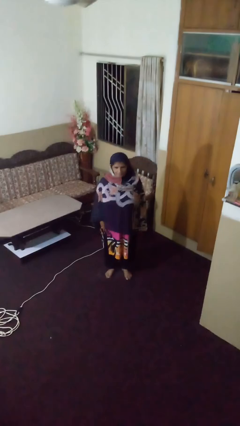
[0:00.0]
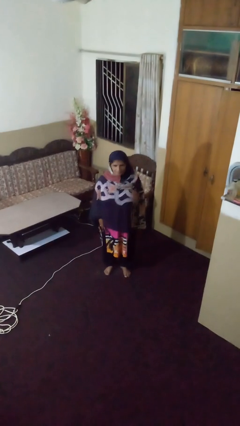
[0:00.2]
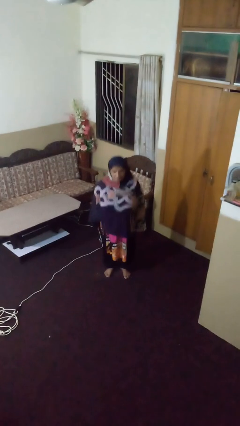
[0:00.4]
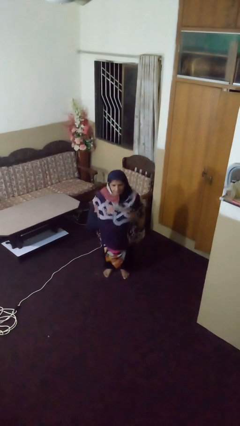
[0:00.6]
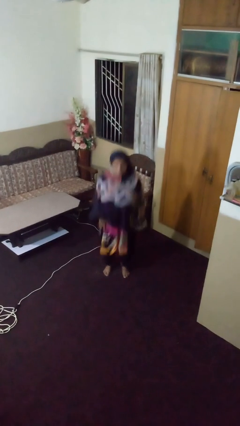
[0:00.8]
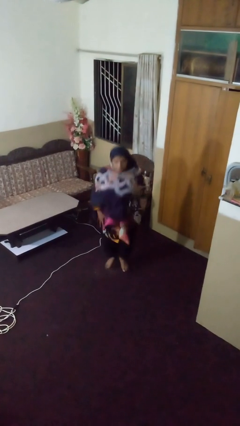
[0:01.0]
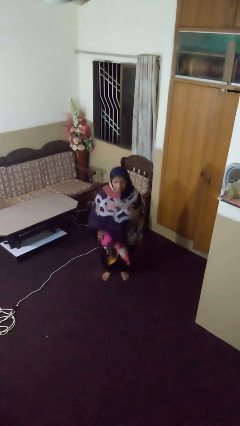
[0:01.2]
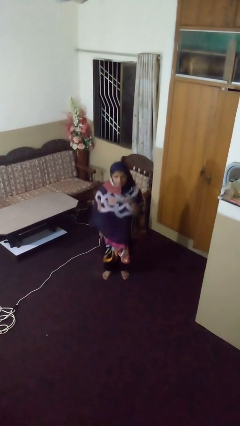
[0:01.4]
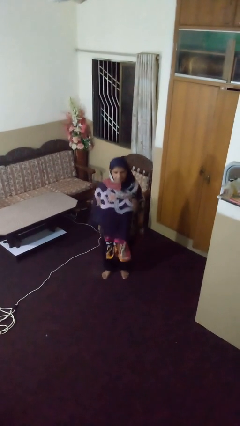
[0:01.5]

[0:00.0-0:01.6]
person jumps

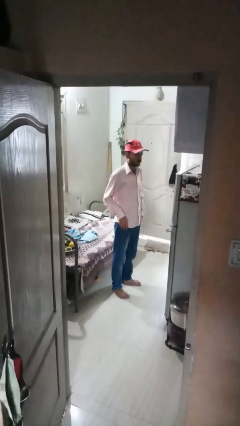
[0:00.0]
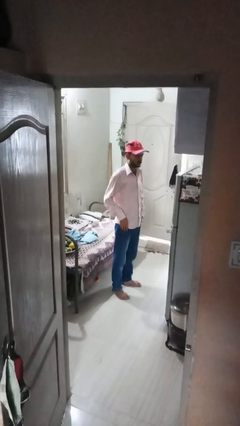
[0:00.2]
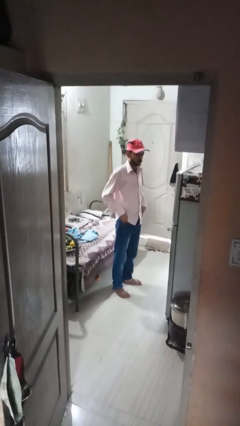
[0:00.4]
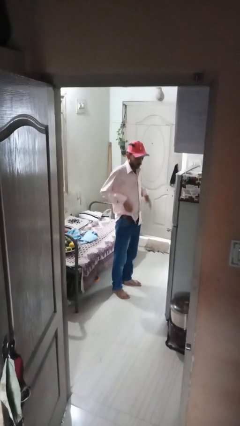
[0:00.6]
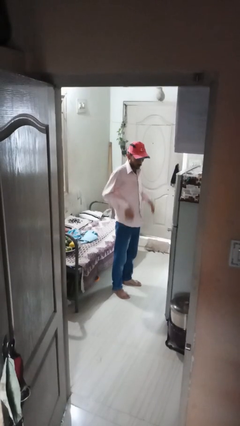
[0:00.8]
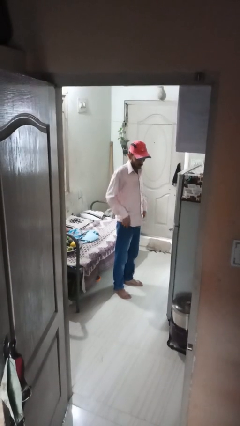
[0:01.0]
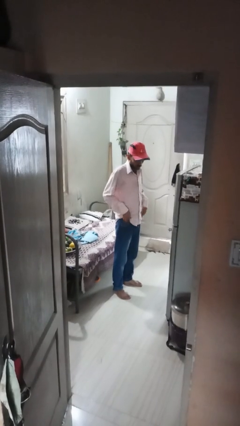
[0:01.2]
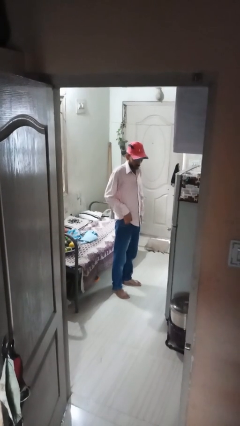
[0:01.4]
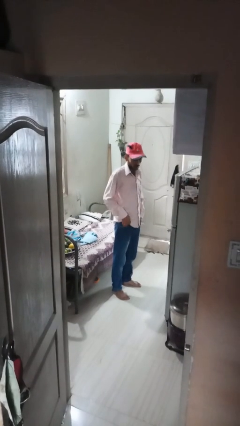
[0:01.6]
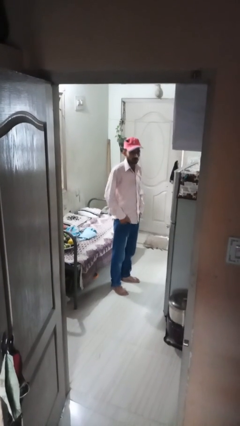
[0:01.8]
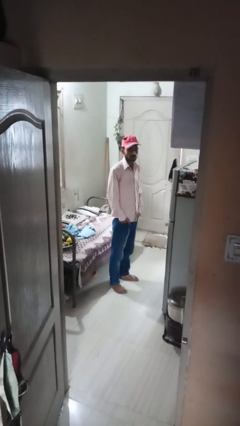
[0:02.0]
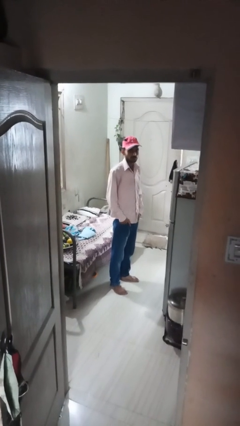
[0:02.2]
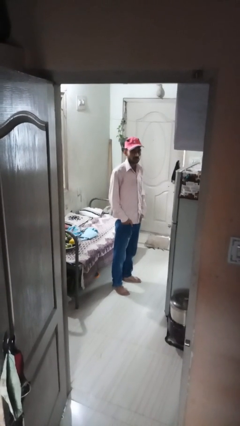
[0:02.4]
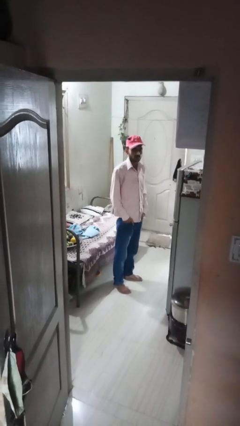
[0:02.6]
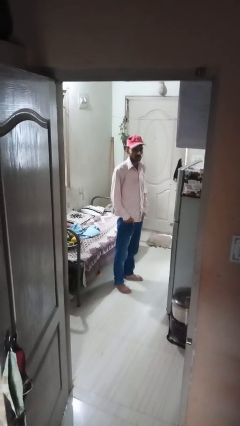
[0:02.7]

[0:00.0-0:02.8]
person puts hands in back pockets

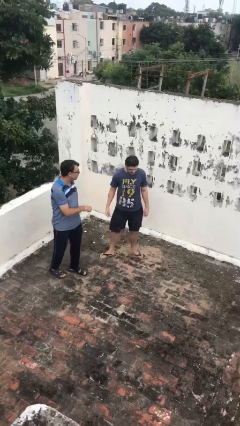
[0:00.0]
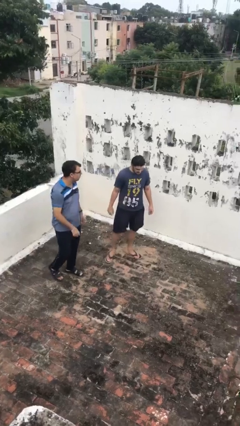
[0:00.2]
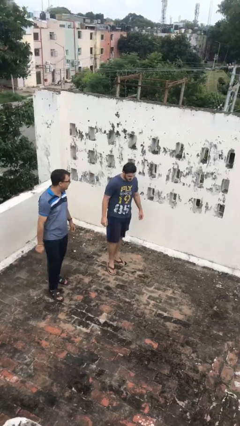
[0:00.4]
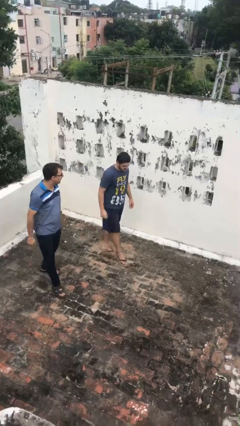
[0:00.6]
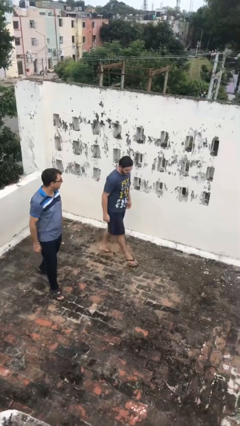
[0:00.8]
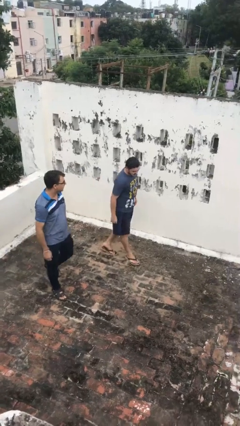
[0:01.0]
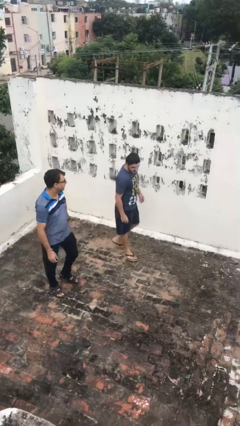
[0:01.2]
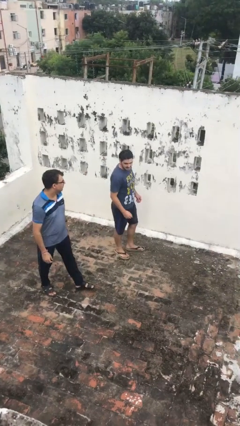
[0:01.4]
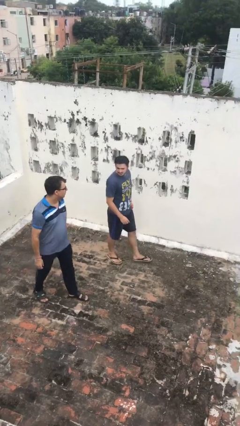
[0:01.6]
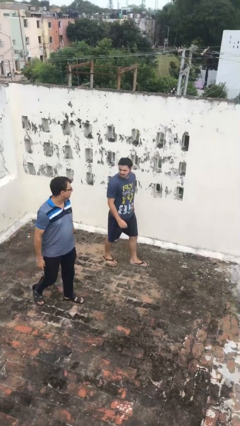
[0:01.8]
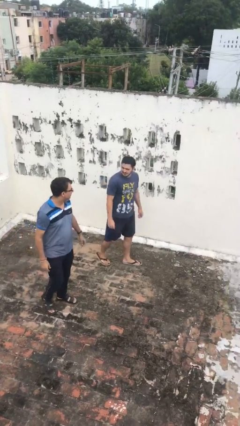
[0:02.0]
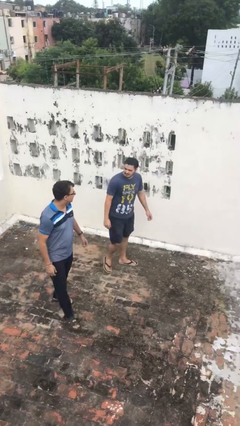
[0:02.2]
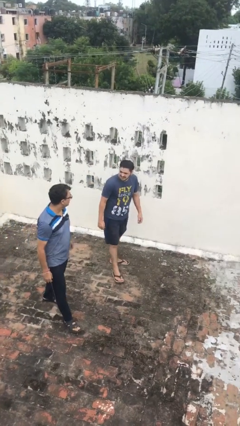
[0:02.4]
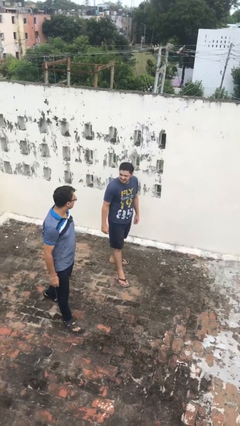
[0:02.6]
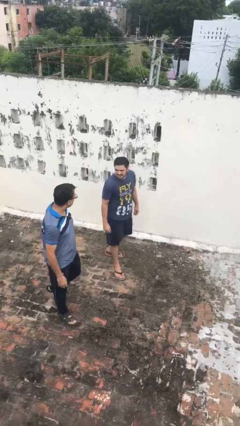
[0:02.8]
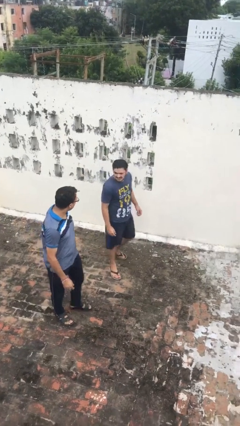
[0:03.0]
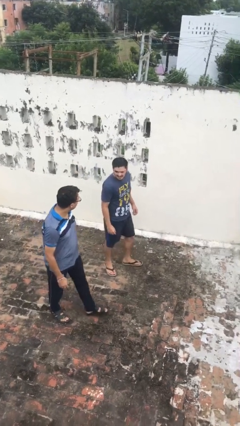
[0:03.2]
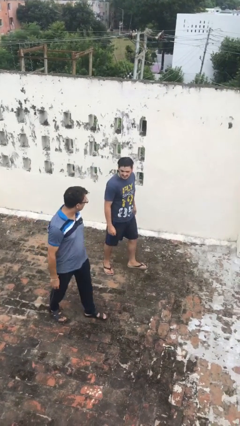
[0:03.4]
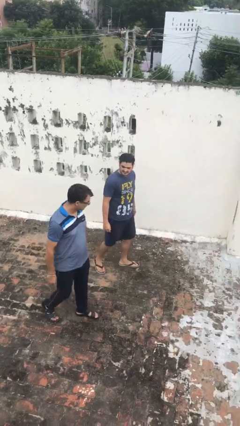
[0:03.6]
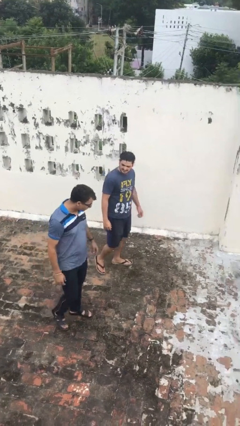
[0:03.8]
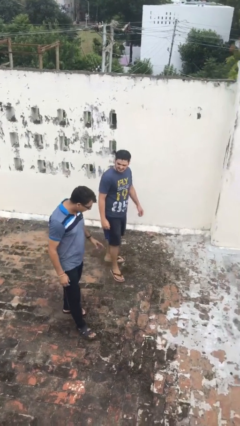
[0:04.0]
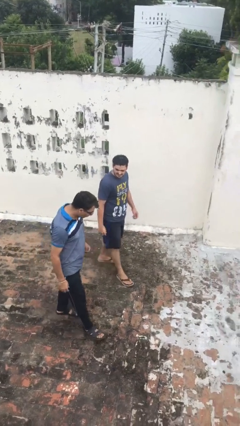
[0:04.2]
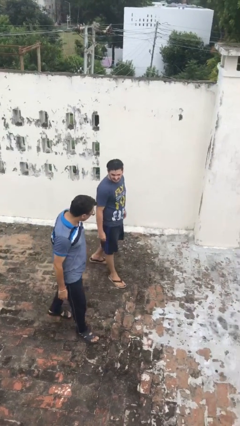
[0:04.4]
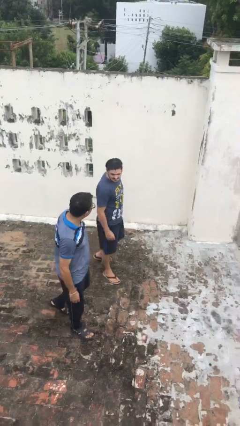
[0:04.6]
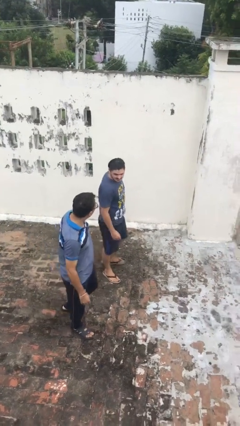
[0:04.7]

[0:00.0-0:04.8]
person talks to person

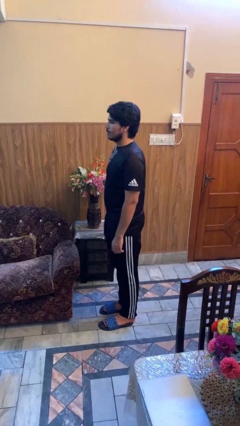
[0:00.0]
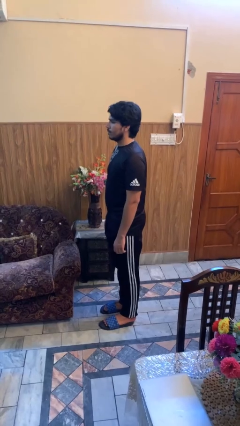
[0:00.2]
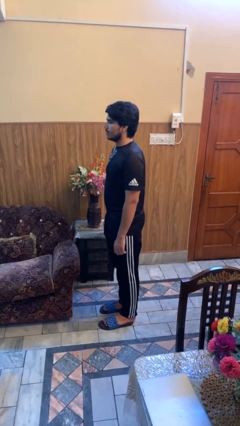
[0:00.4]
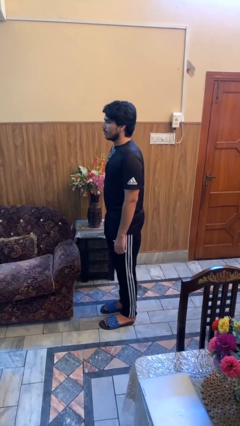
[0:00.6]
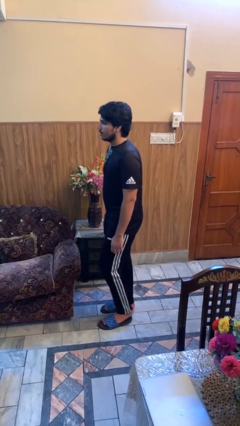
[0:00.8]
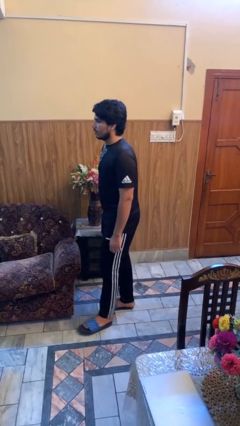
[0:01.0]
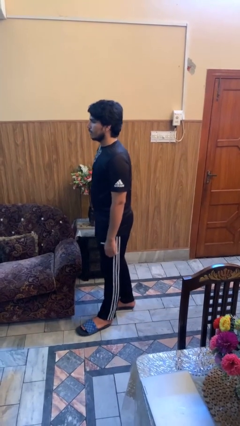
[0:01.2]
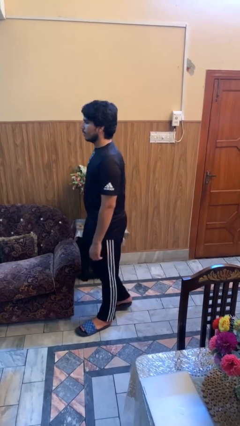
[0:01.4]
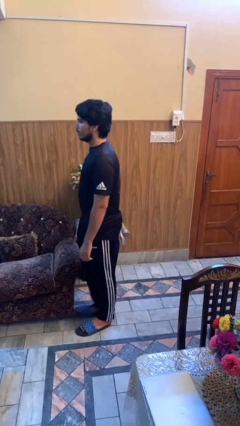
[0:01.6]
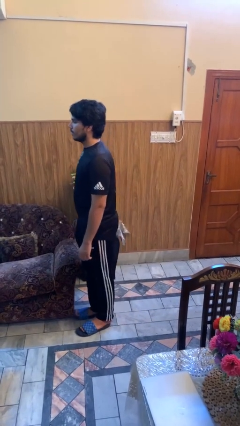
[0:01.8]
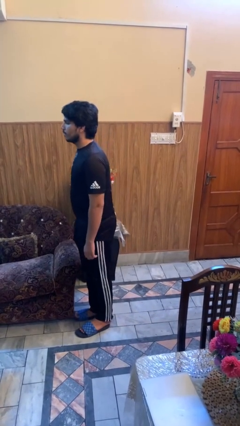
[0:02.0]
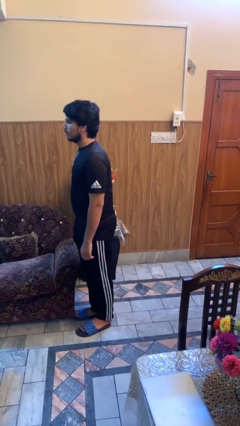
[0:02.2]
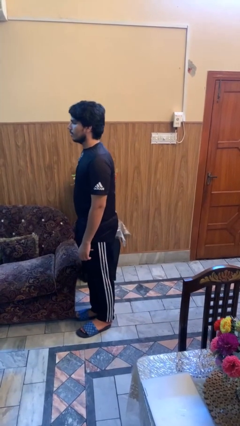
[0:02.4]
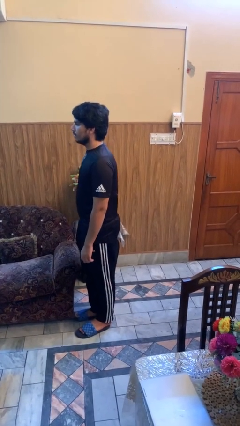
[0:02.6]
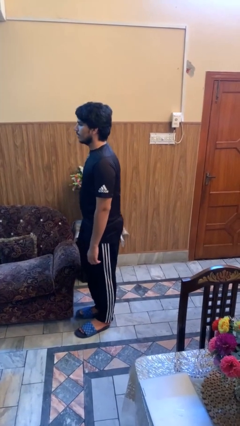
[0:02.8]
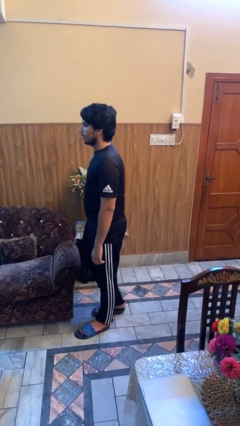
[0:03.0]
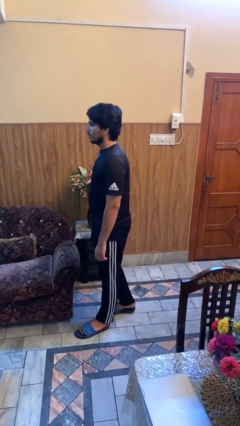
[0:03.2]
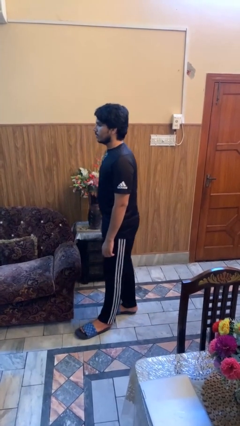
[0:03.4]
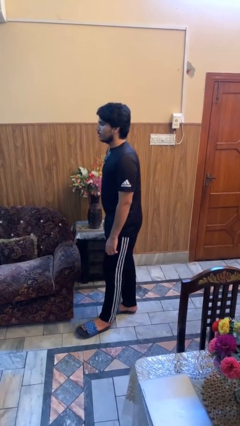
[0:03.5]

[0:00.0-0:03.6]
person stubs toe

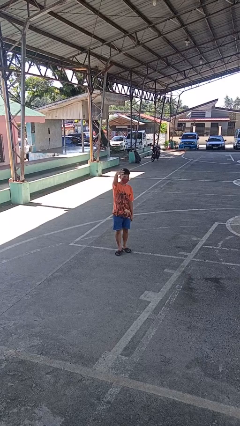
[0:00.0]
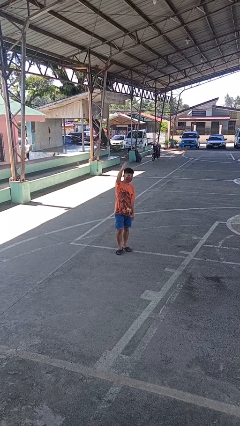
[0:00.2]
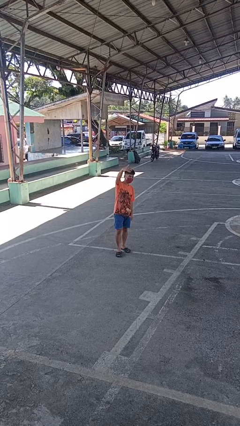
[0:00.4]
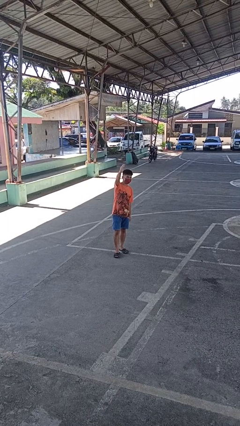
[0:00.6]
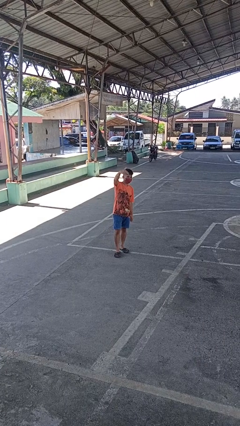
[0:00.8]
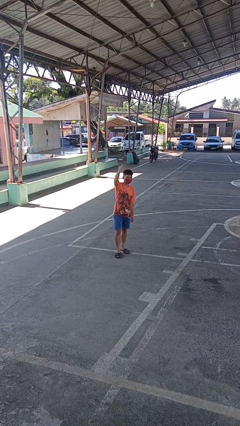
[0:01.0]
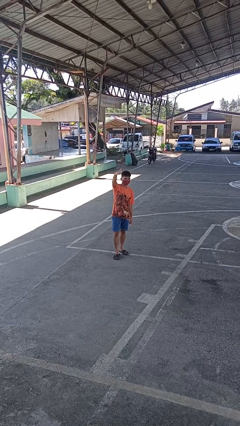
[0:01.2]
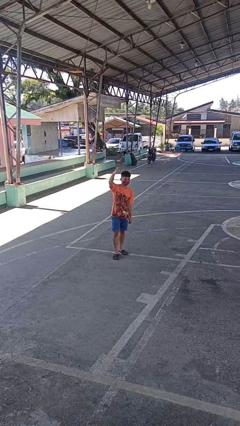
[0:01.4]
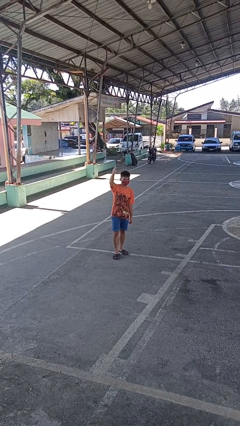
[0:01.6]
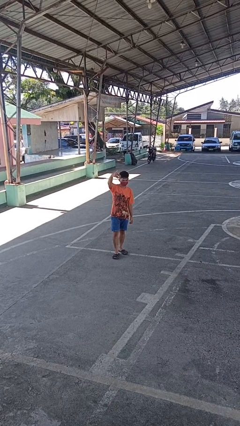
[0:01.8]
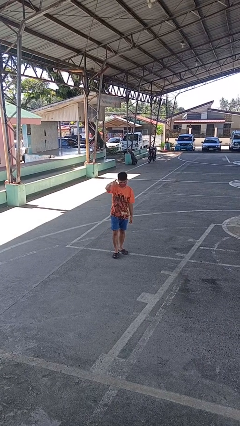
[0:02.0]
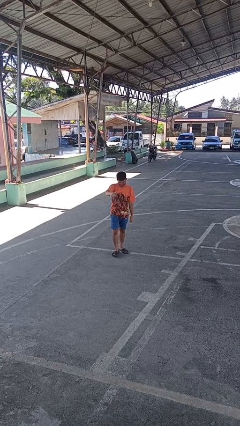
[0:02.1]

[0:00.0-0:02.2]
person gestures come here

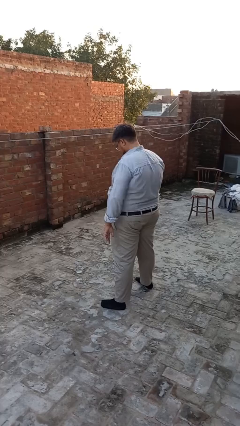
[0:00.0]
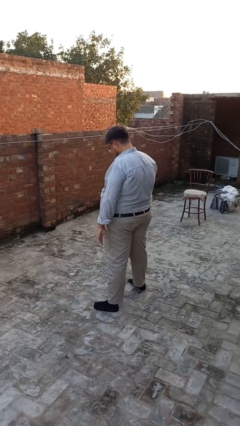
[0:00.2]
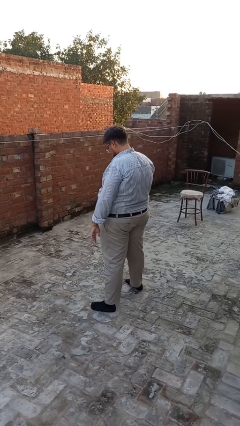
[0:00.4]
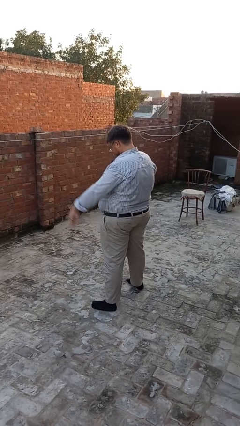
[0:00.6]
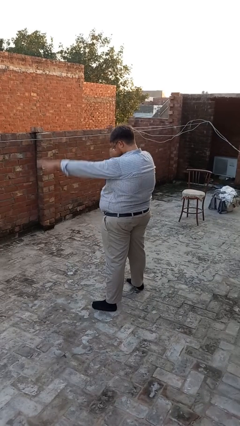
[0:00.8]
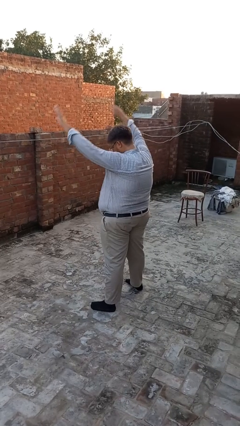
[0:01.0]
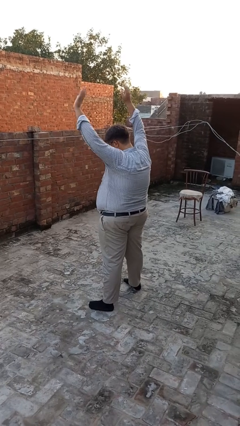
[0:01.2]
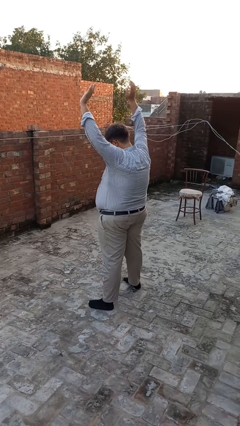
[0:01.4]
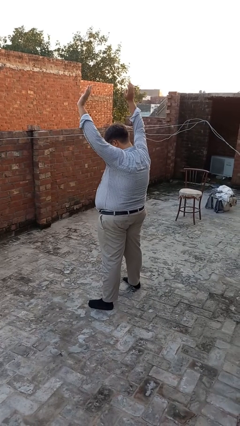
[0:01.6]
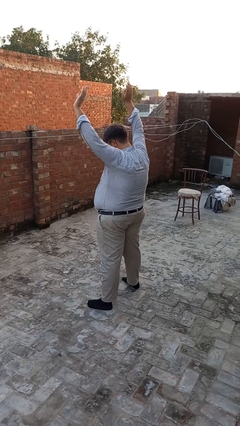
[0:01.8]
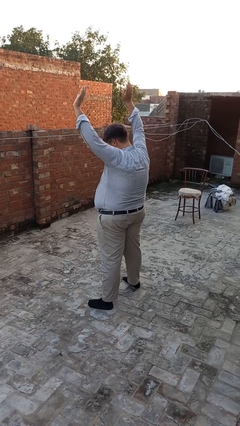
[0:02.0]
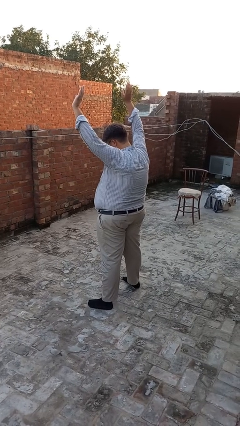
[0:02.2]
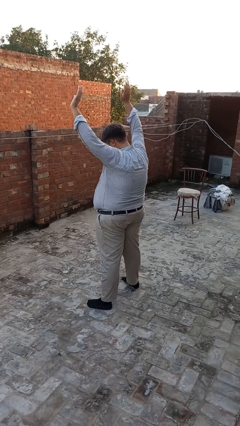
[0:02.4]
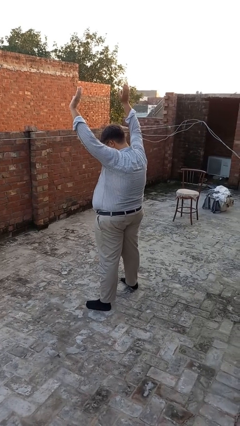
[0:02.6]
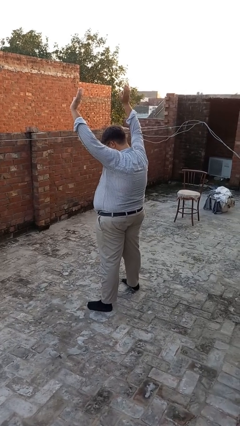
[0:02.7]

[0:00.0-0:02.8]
person gestures swipe up
